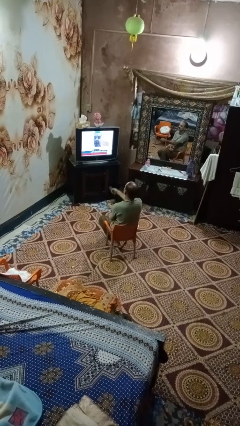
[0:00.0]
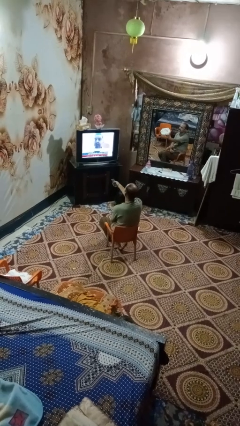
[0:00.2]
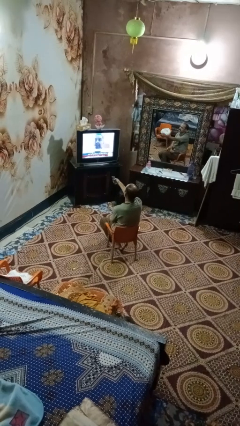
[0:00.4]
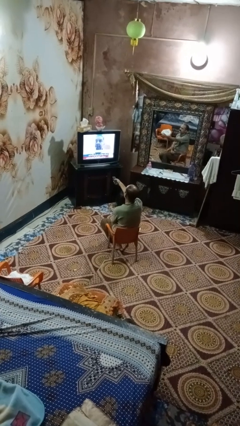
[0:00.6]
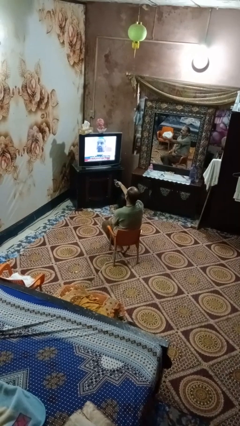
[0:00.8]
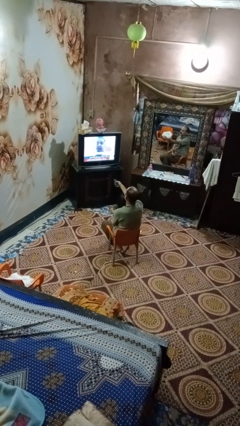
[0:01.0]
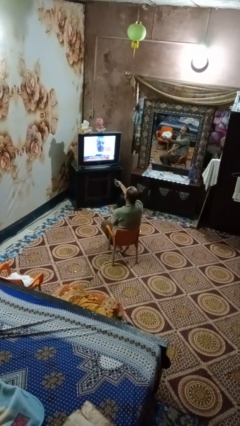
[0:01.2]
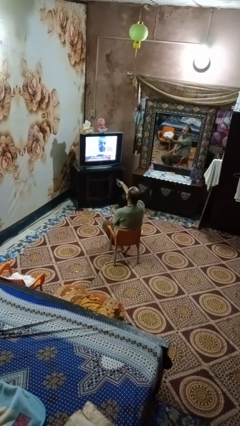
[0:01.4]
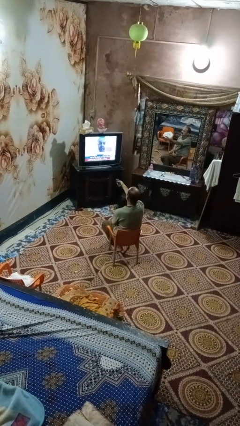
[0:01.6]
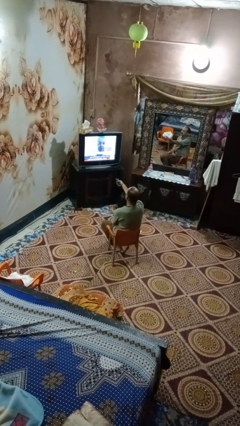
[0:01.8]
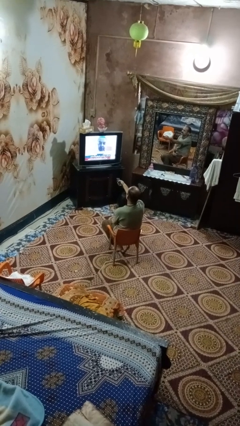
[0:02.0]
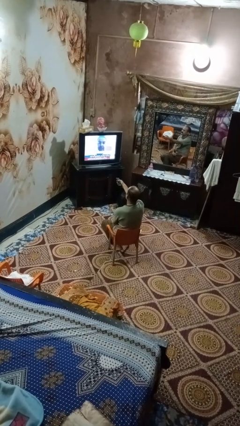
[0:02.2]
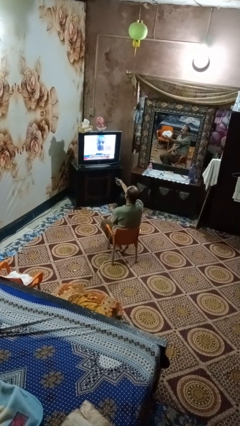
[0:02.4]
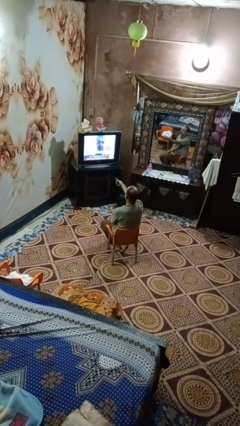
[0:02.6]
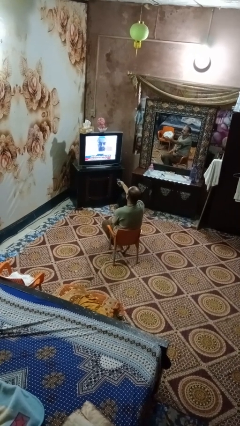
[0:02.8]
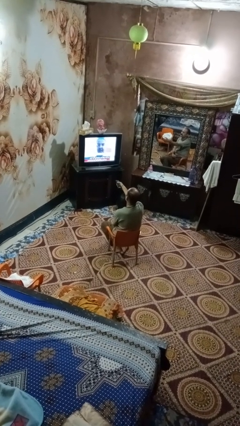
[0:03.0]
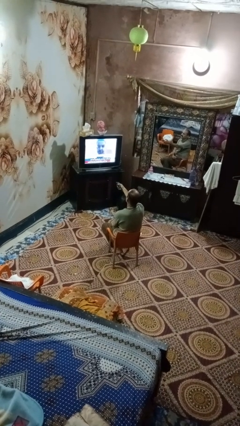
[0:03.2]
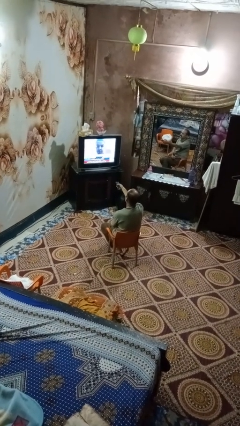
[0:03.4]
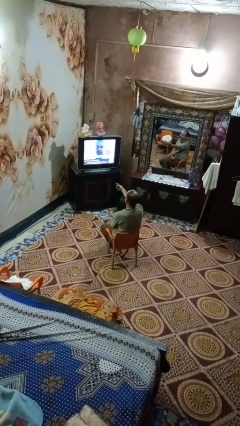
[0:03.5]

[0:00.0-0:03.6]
person uses television remote

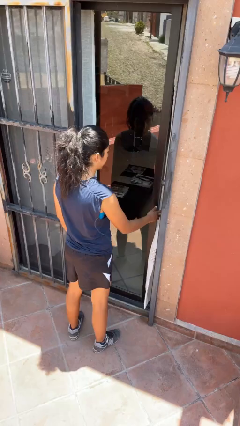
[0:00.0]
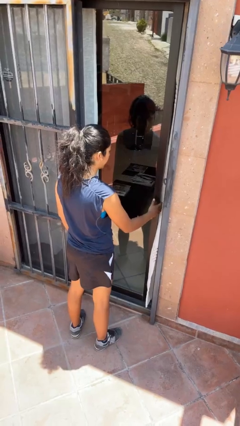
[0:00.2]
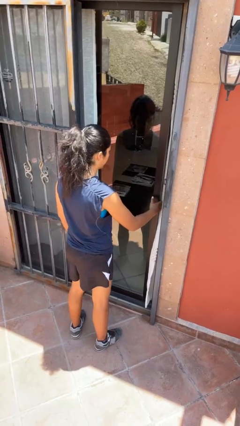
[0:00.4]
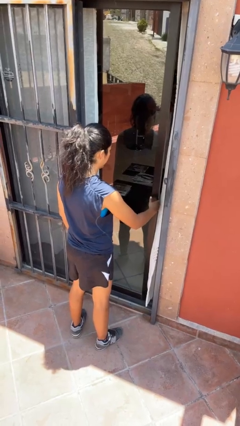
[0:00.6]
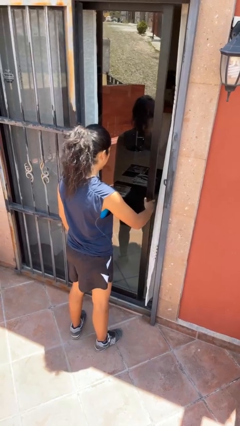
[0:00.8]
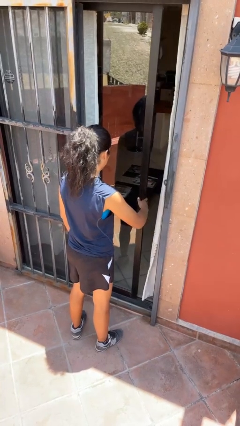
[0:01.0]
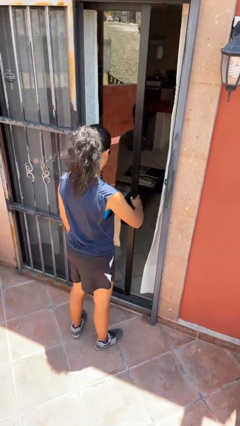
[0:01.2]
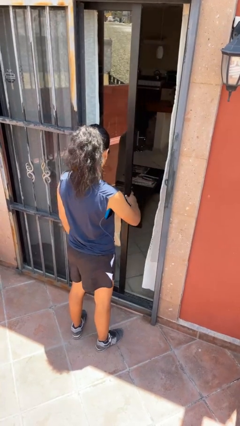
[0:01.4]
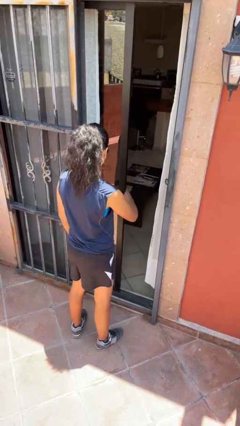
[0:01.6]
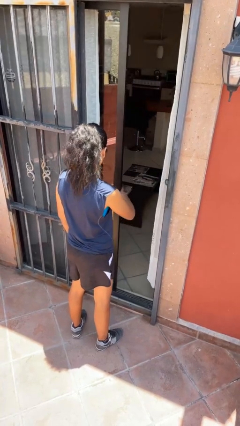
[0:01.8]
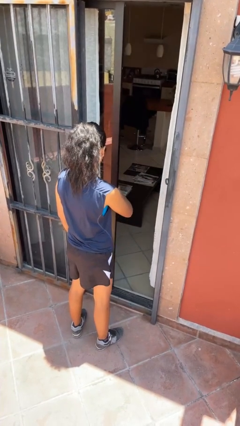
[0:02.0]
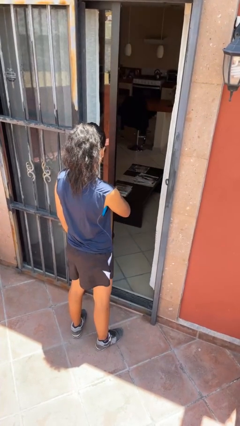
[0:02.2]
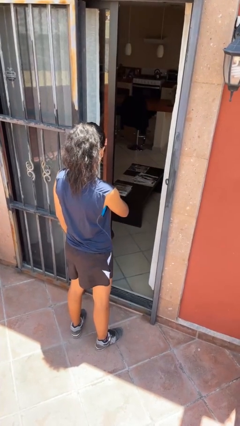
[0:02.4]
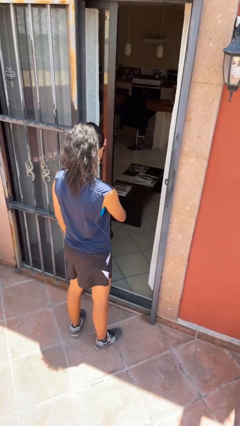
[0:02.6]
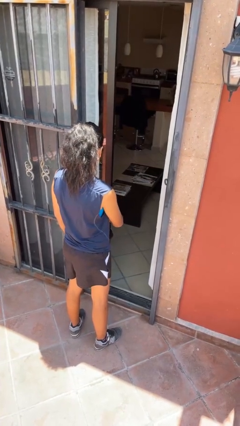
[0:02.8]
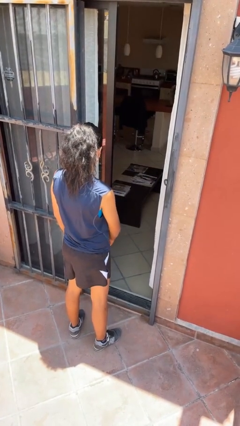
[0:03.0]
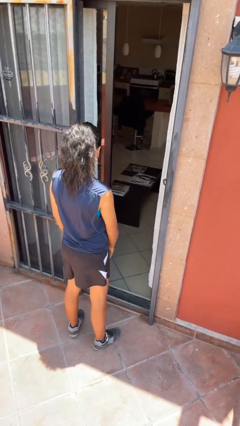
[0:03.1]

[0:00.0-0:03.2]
person opens sliding door

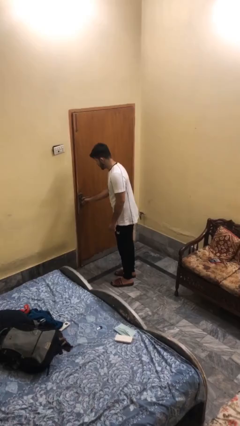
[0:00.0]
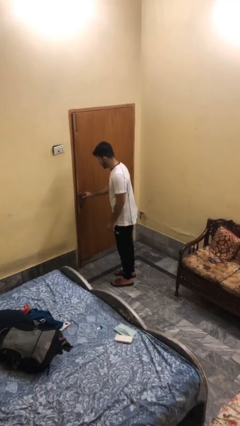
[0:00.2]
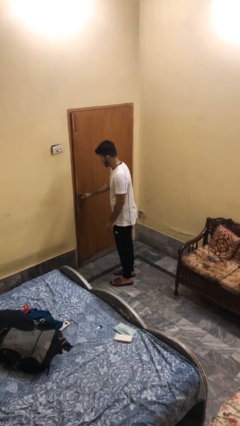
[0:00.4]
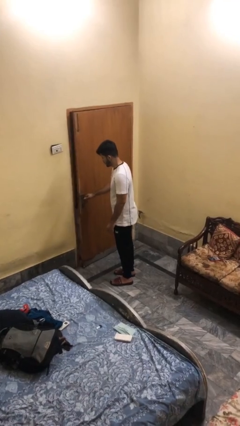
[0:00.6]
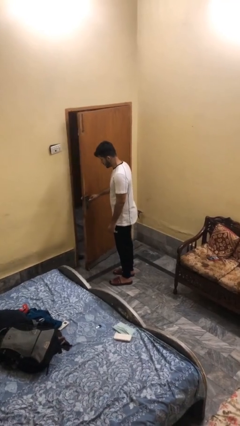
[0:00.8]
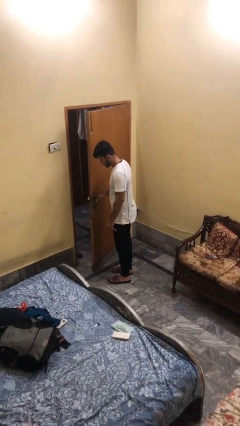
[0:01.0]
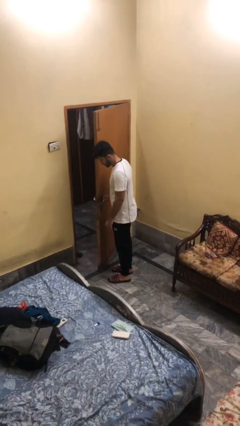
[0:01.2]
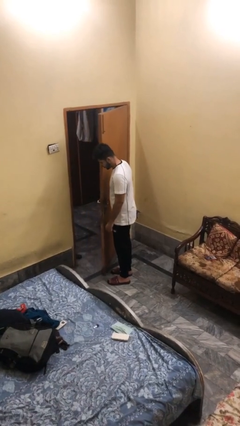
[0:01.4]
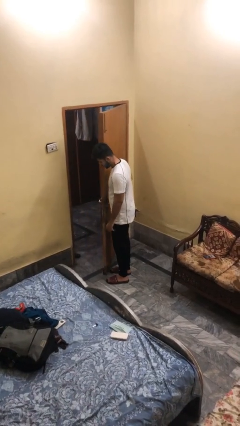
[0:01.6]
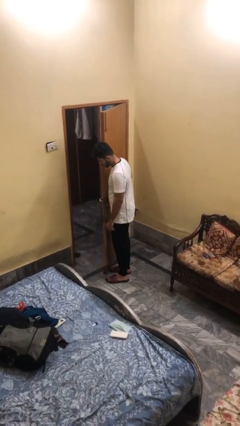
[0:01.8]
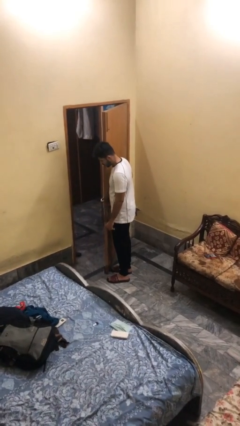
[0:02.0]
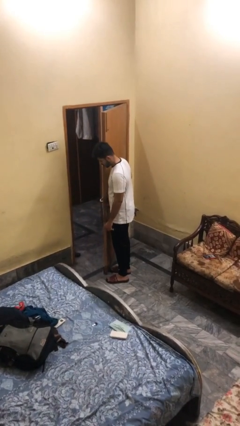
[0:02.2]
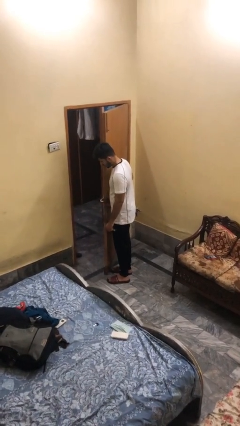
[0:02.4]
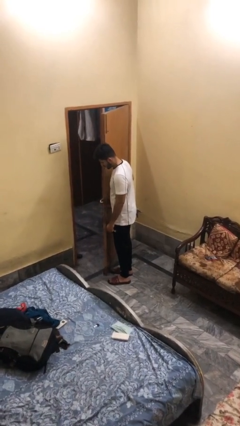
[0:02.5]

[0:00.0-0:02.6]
person opens facility door

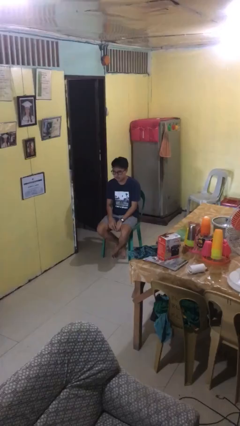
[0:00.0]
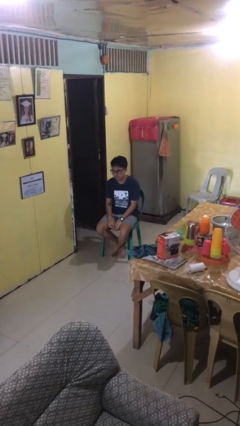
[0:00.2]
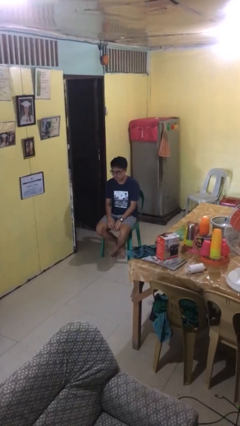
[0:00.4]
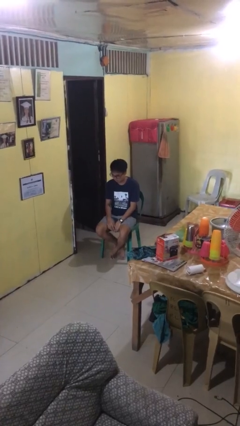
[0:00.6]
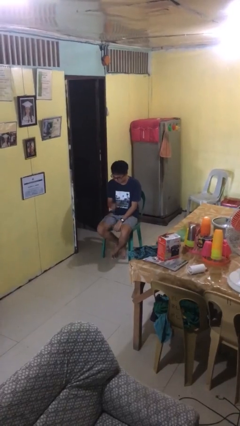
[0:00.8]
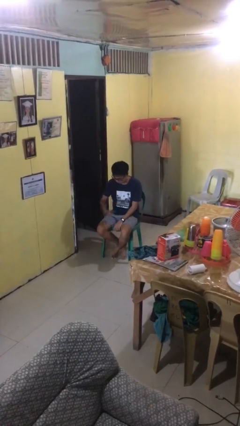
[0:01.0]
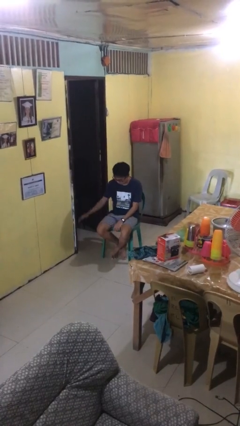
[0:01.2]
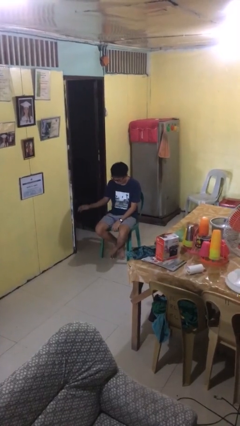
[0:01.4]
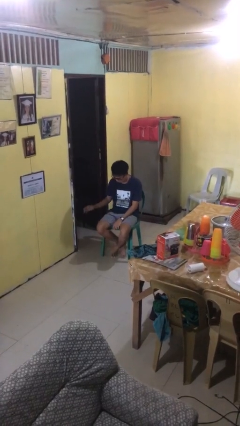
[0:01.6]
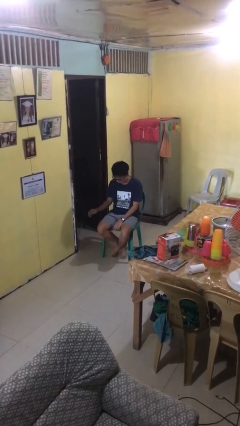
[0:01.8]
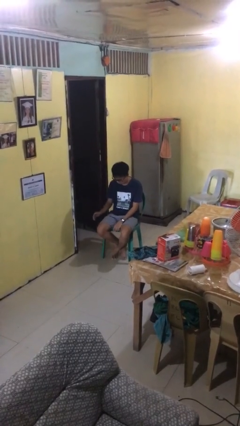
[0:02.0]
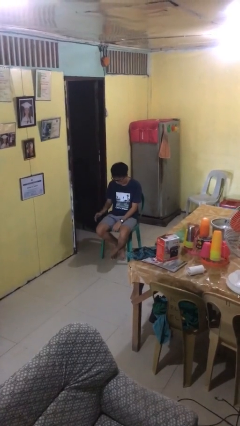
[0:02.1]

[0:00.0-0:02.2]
person swats bug

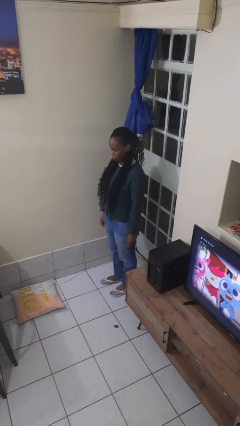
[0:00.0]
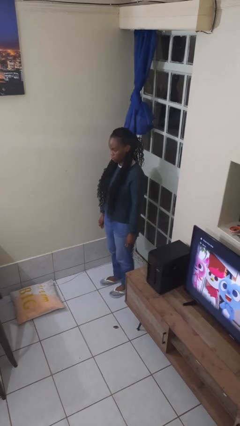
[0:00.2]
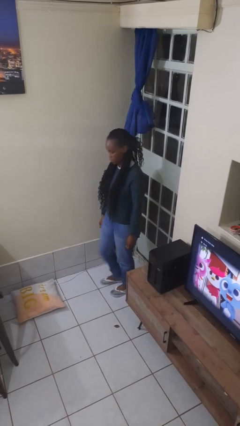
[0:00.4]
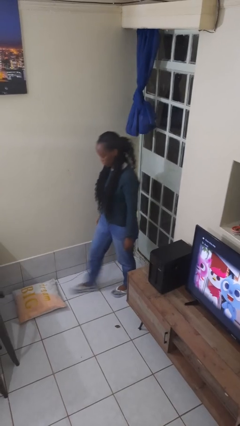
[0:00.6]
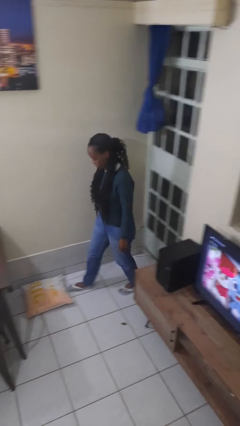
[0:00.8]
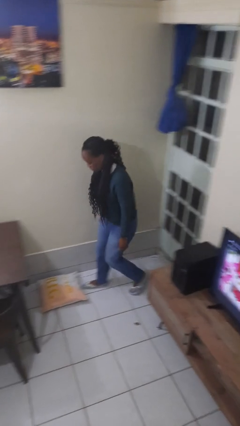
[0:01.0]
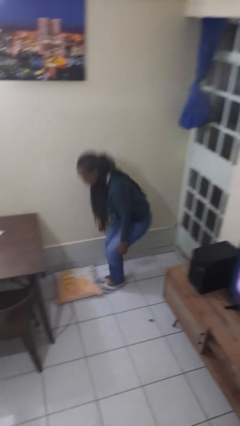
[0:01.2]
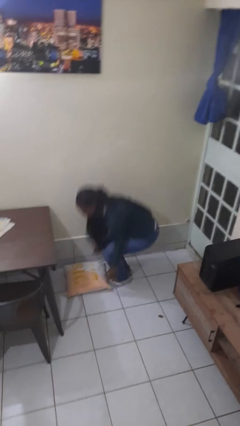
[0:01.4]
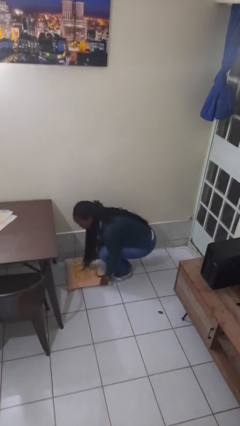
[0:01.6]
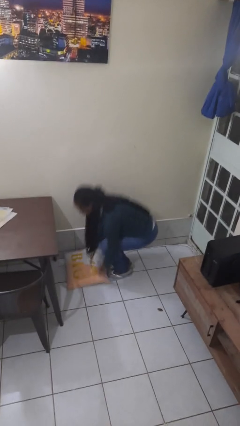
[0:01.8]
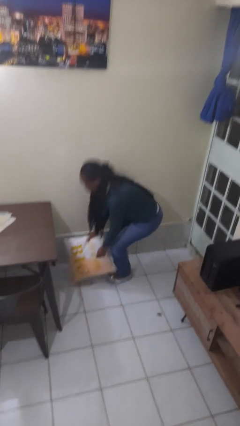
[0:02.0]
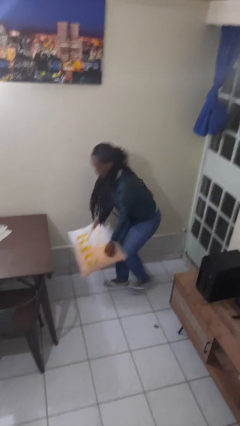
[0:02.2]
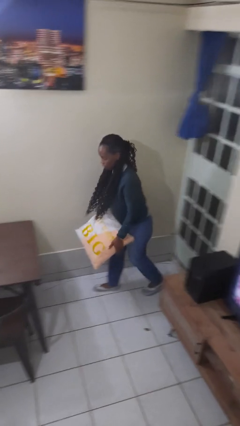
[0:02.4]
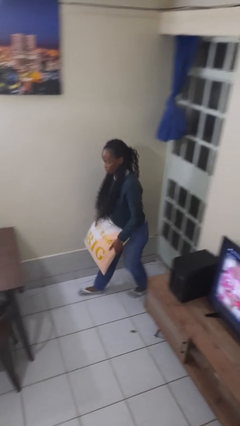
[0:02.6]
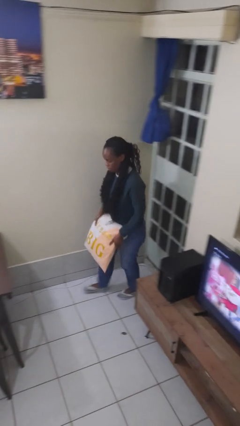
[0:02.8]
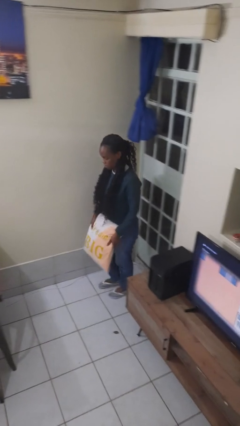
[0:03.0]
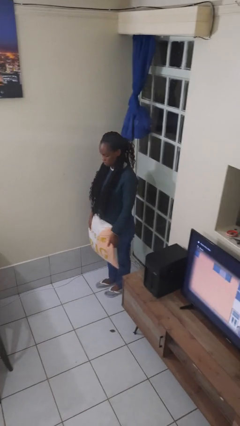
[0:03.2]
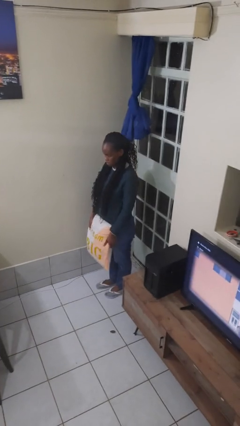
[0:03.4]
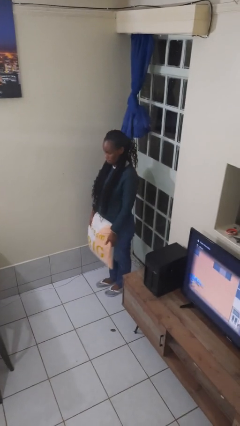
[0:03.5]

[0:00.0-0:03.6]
person picks up object from floor

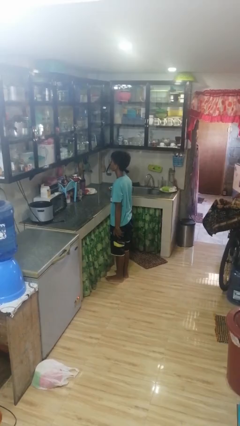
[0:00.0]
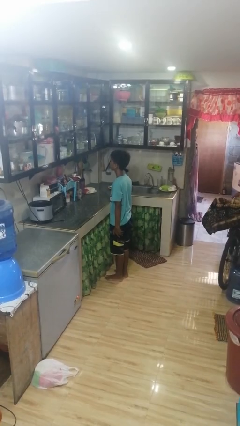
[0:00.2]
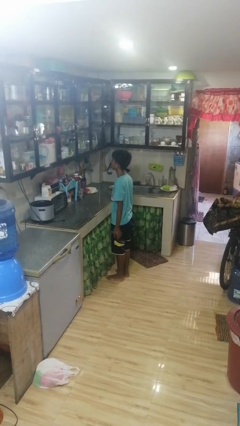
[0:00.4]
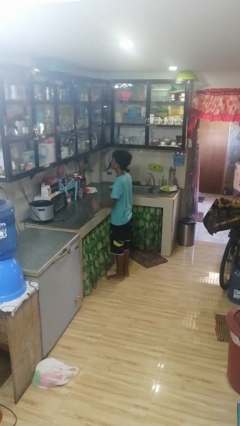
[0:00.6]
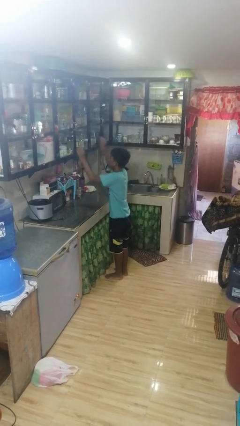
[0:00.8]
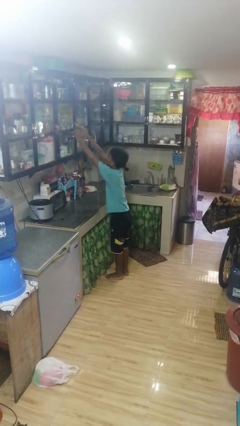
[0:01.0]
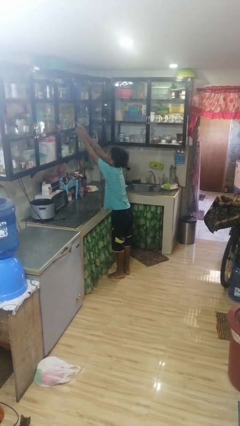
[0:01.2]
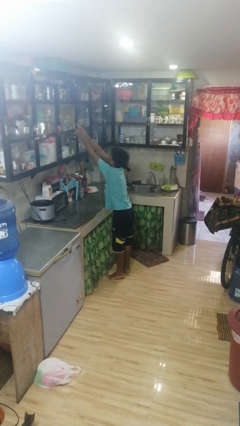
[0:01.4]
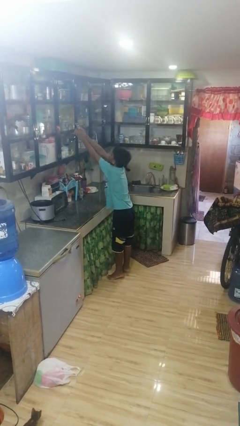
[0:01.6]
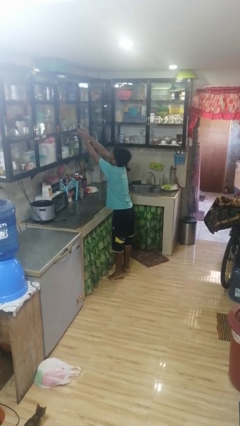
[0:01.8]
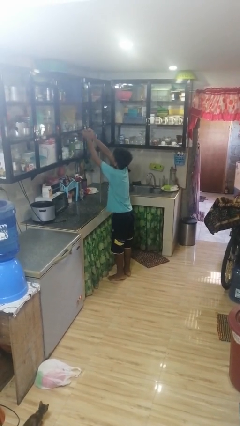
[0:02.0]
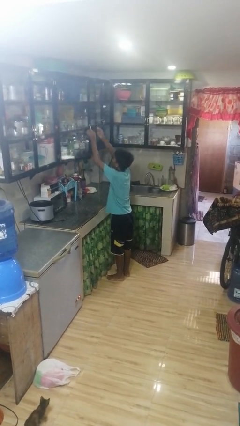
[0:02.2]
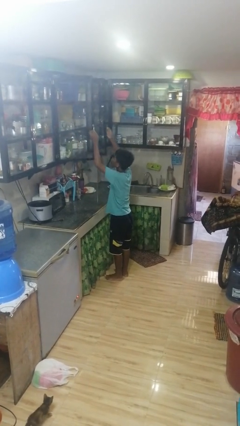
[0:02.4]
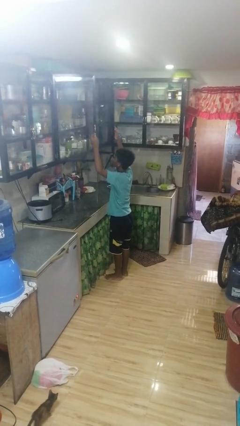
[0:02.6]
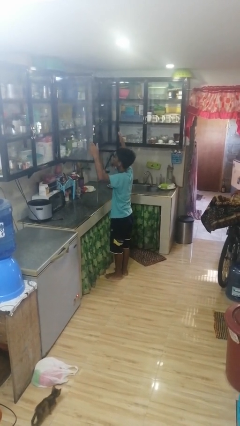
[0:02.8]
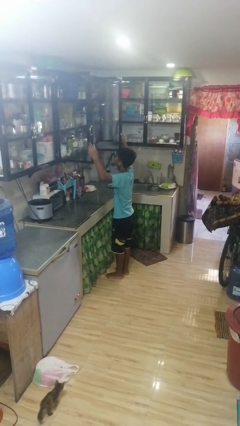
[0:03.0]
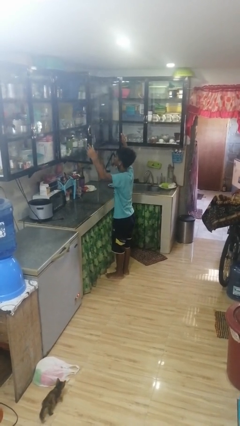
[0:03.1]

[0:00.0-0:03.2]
person opens cabinet
